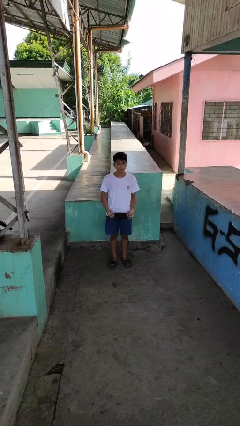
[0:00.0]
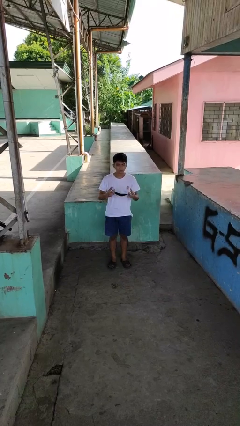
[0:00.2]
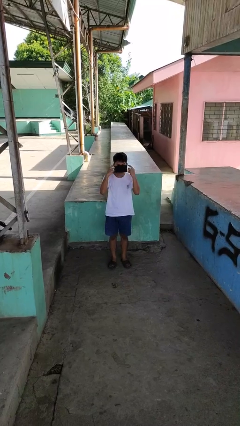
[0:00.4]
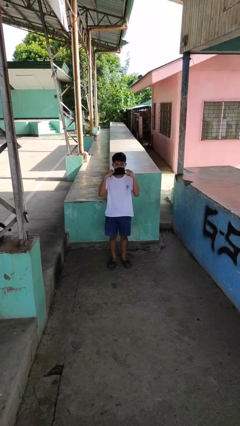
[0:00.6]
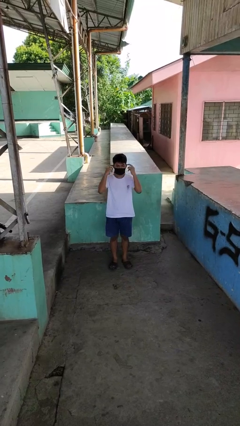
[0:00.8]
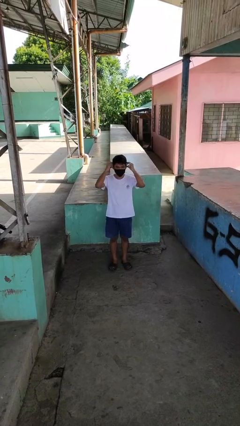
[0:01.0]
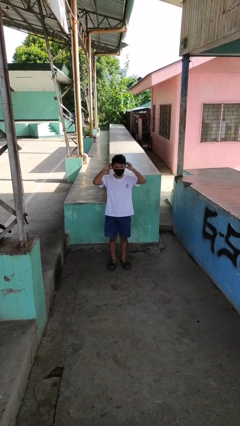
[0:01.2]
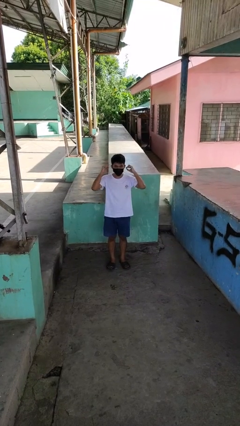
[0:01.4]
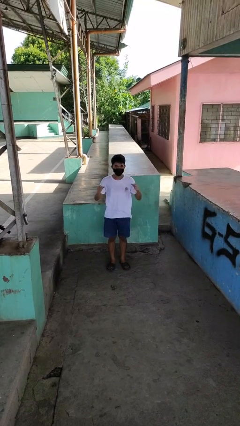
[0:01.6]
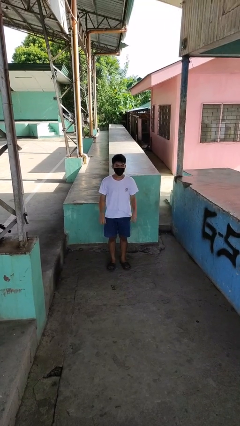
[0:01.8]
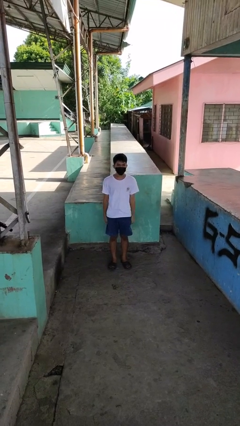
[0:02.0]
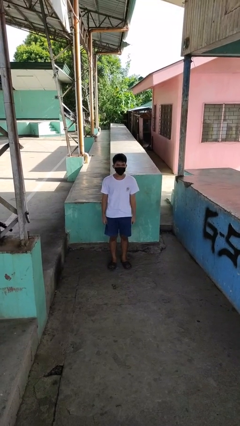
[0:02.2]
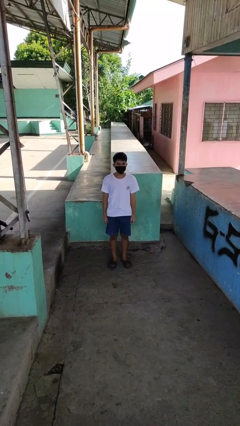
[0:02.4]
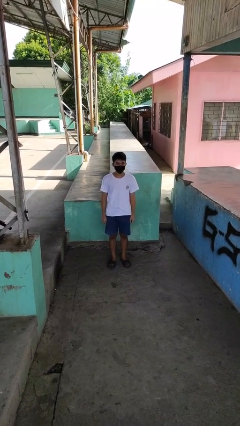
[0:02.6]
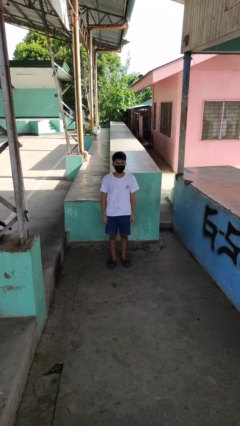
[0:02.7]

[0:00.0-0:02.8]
person puts on facemask

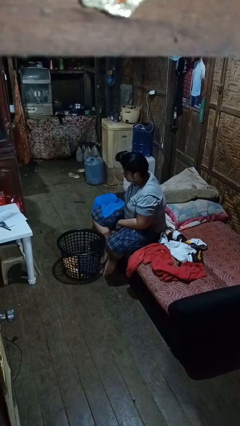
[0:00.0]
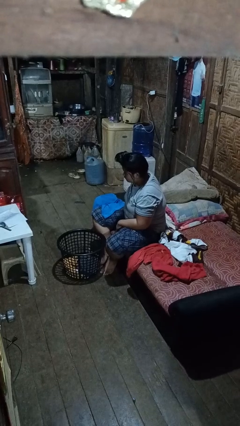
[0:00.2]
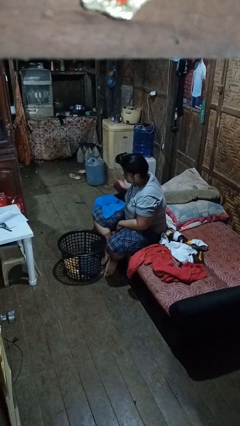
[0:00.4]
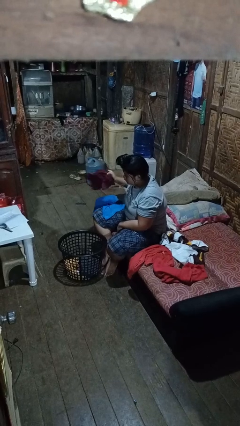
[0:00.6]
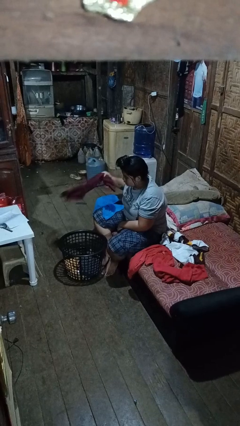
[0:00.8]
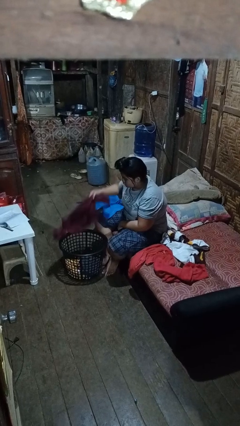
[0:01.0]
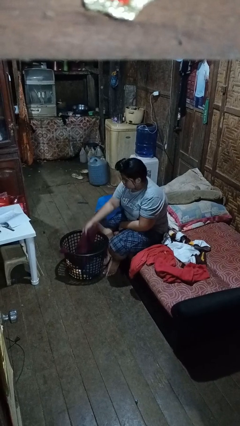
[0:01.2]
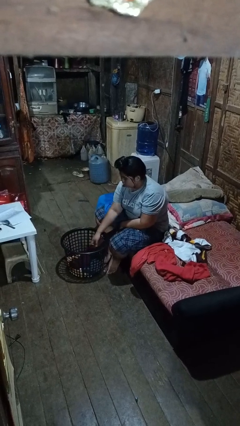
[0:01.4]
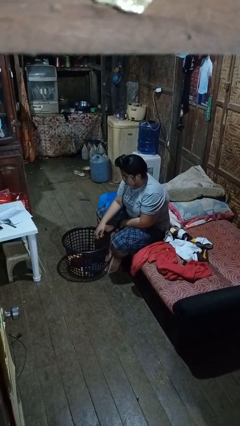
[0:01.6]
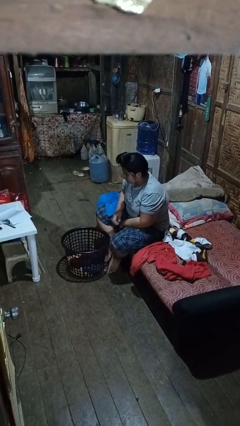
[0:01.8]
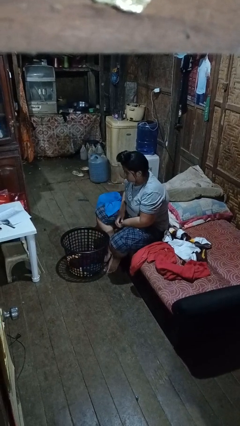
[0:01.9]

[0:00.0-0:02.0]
person puts object into basket

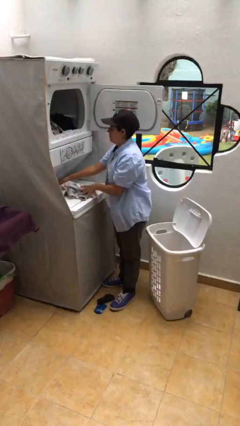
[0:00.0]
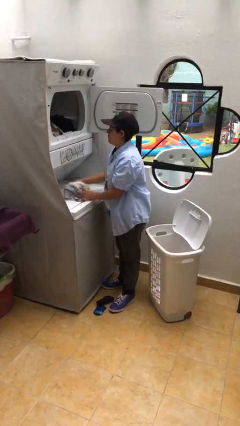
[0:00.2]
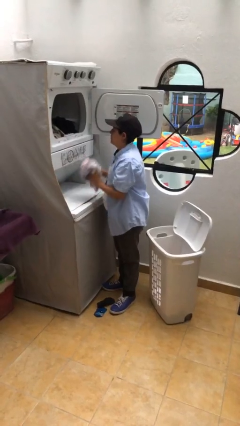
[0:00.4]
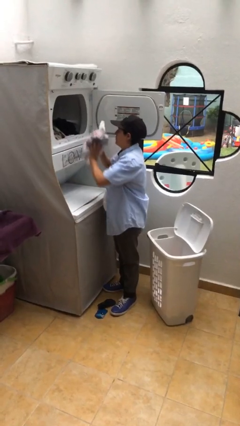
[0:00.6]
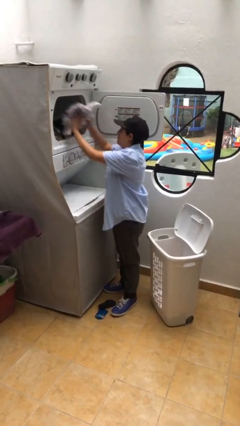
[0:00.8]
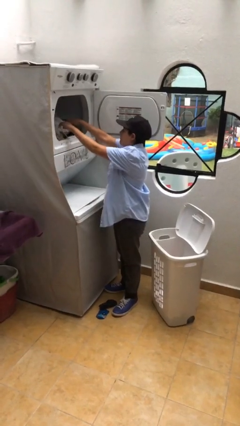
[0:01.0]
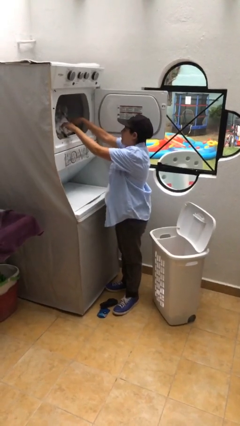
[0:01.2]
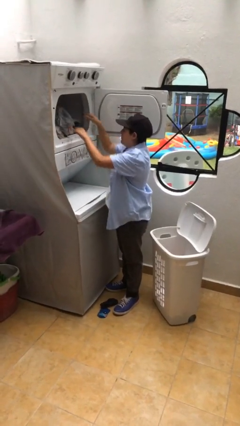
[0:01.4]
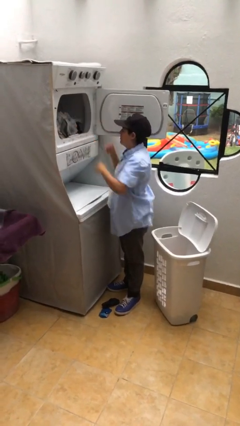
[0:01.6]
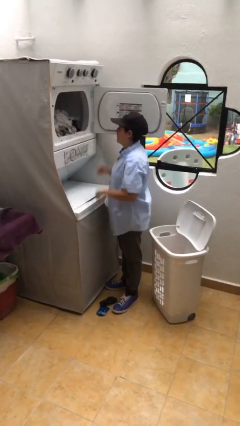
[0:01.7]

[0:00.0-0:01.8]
person loads dryer

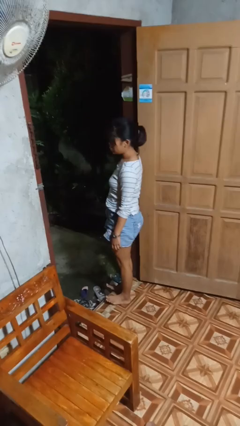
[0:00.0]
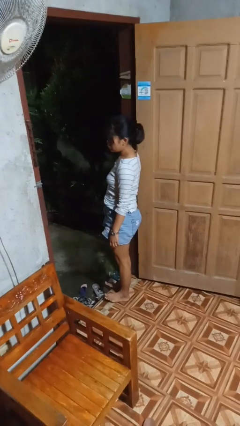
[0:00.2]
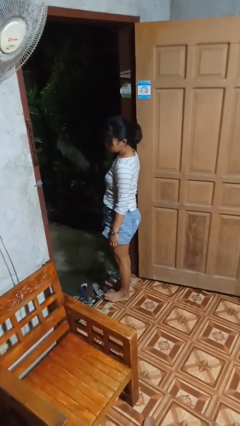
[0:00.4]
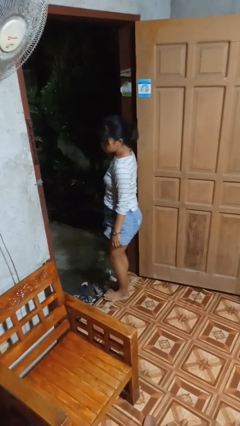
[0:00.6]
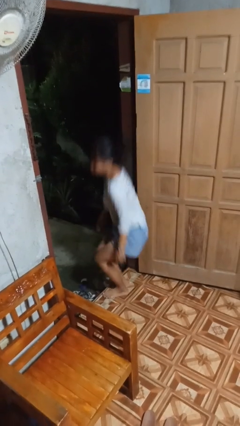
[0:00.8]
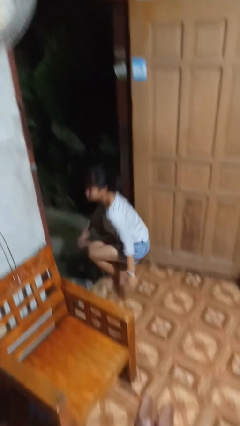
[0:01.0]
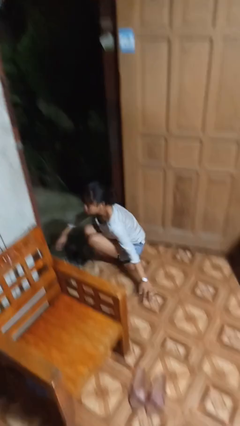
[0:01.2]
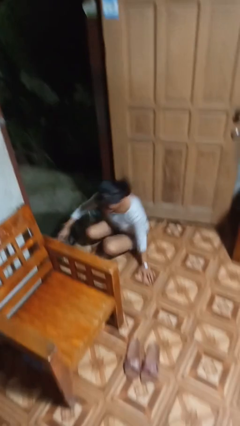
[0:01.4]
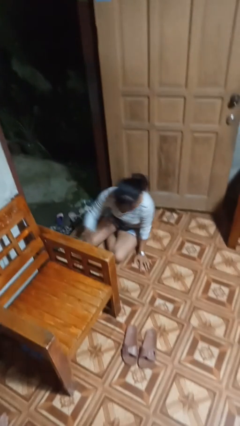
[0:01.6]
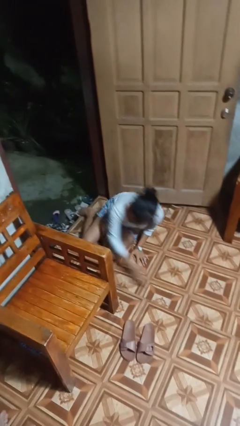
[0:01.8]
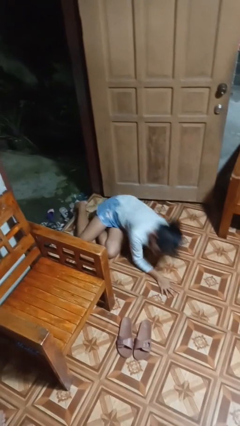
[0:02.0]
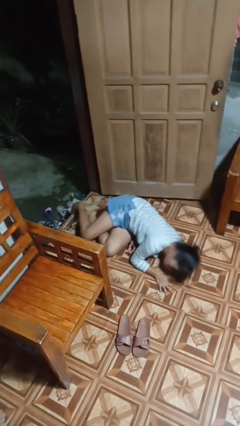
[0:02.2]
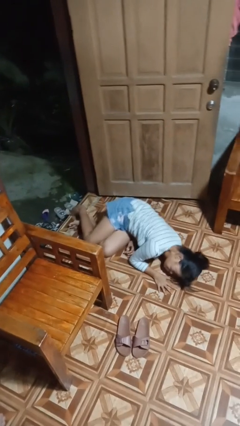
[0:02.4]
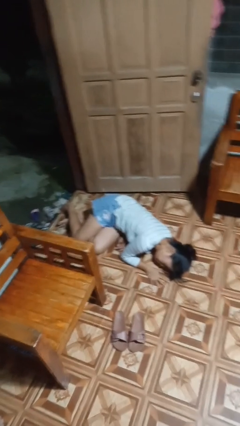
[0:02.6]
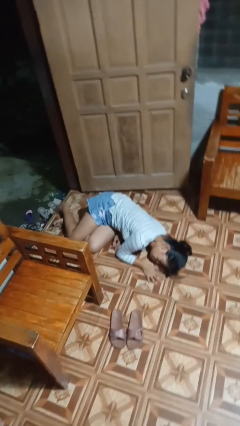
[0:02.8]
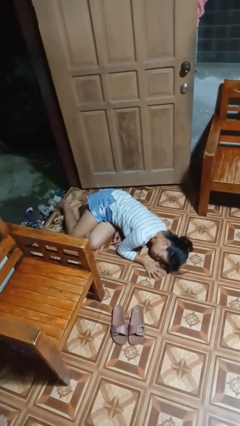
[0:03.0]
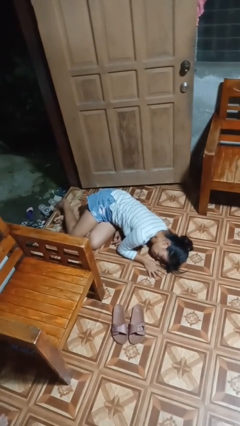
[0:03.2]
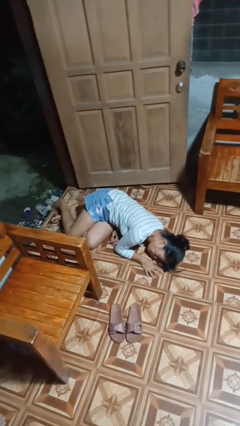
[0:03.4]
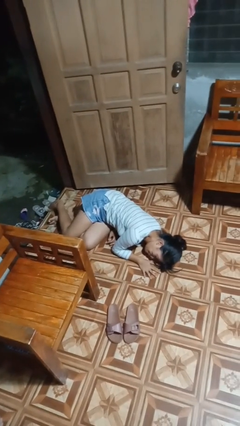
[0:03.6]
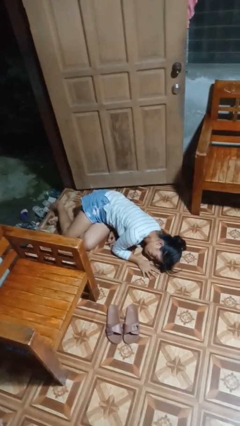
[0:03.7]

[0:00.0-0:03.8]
person falls while standing

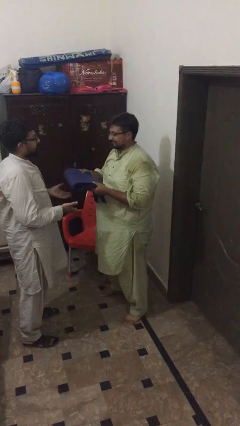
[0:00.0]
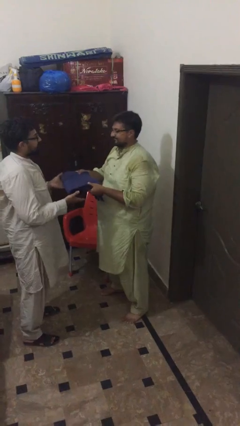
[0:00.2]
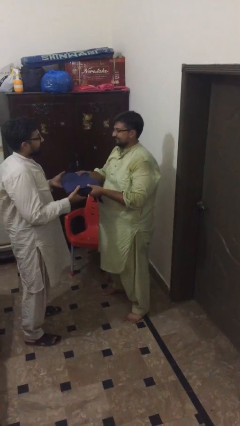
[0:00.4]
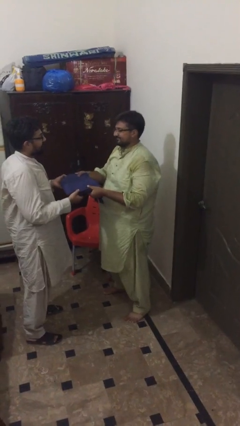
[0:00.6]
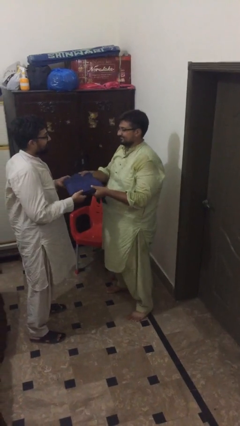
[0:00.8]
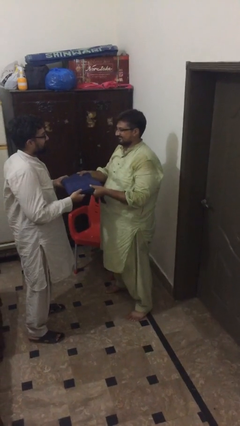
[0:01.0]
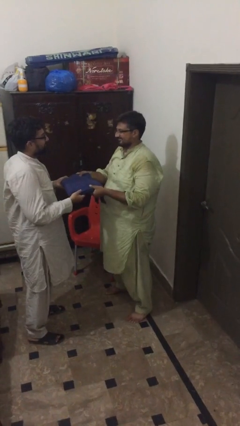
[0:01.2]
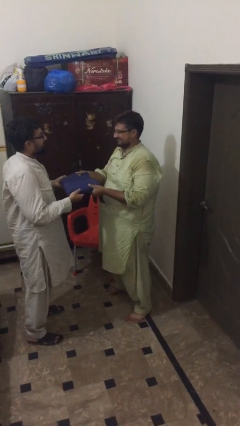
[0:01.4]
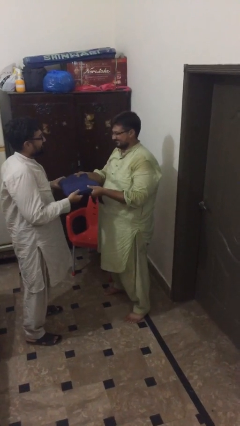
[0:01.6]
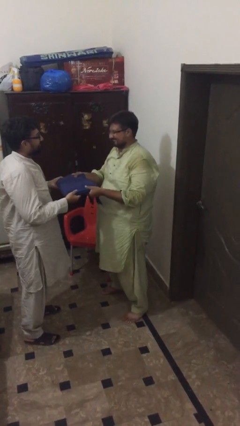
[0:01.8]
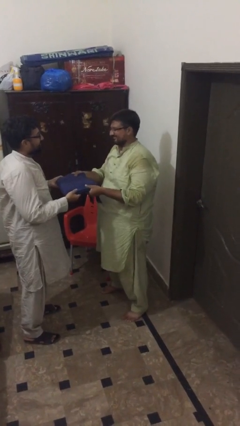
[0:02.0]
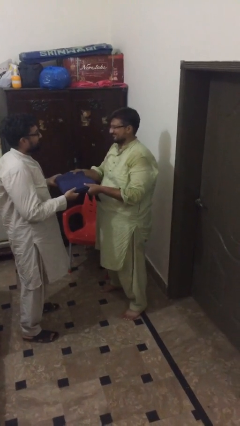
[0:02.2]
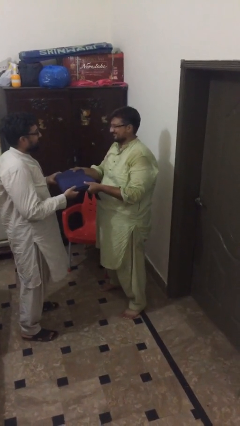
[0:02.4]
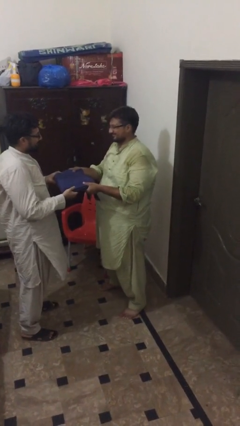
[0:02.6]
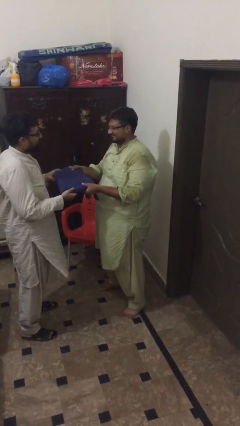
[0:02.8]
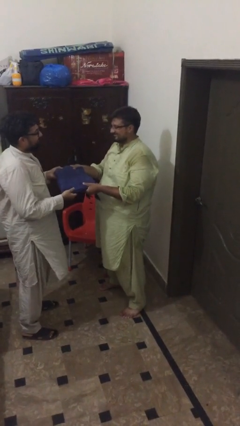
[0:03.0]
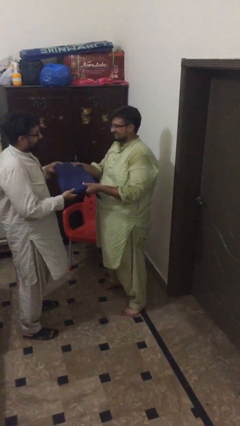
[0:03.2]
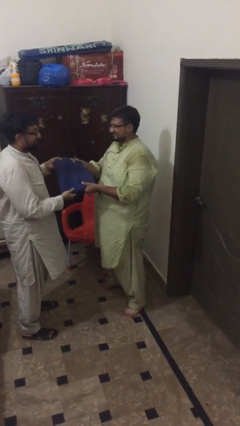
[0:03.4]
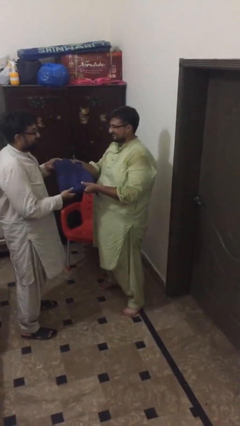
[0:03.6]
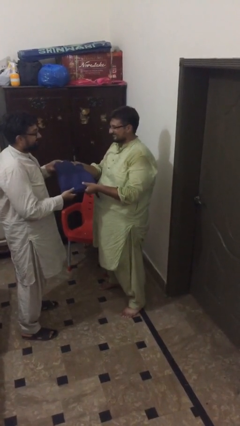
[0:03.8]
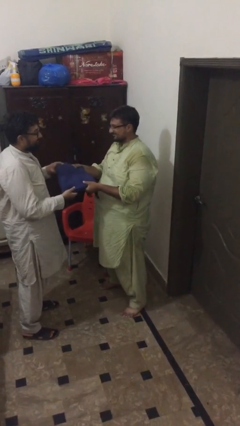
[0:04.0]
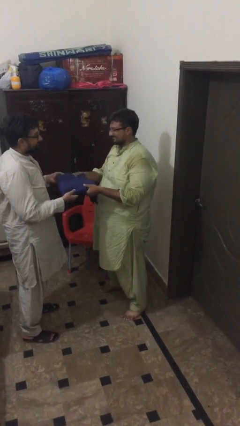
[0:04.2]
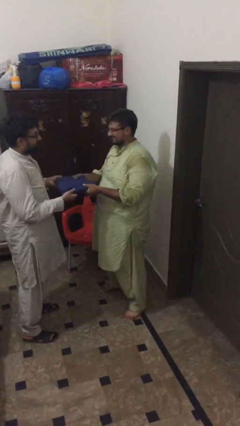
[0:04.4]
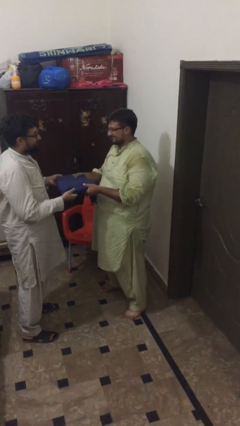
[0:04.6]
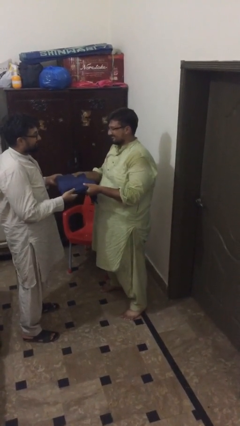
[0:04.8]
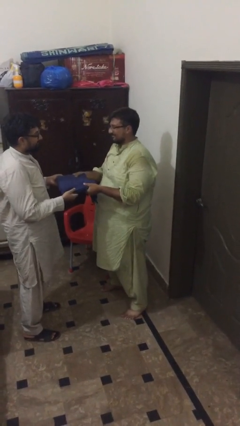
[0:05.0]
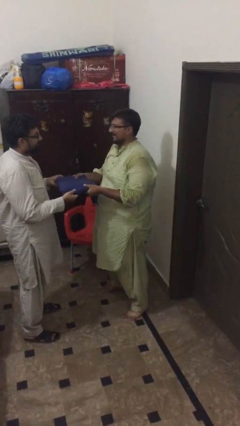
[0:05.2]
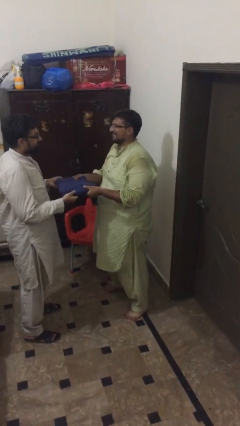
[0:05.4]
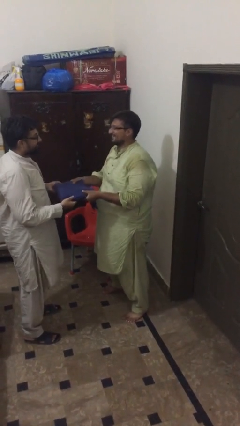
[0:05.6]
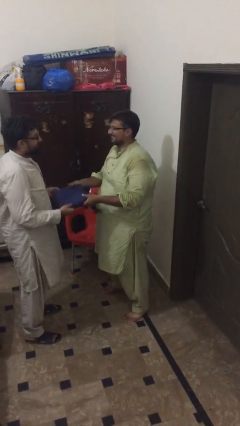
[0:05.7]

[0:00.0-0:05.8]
person transfers object to person

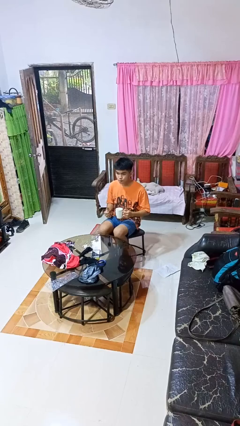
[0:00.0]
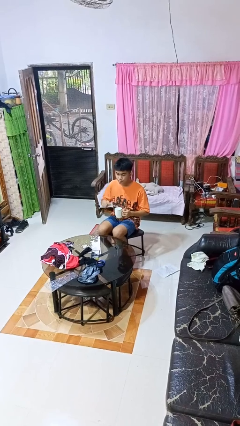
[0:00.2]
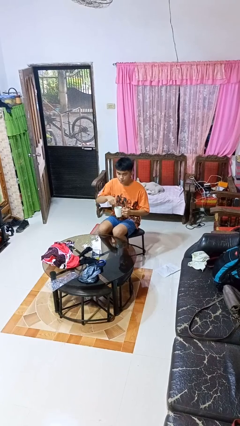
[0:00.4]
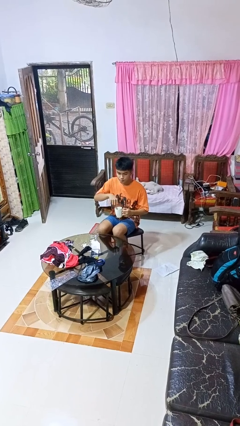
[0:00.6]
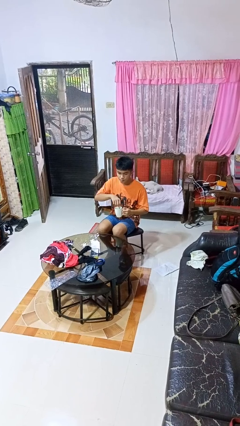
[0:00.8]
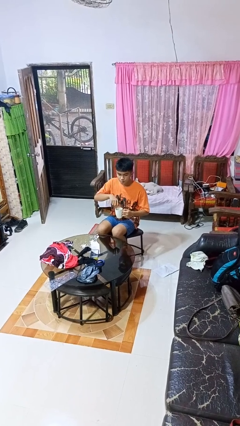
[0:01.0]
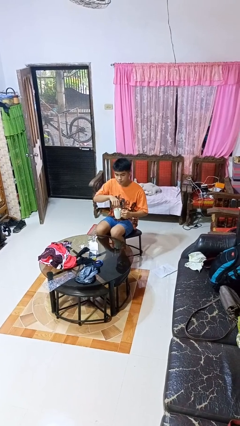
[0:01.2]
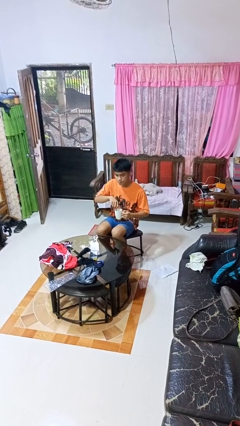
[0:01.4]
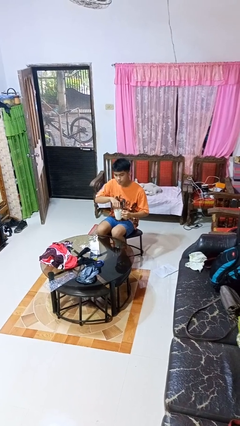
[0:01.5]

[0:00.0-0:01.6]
person stirs mug
